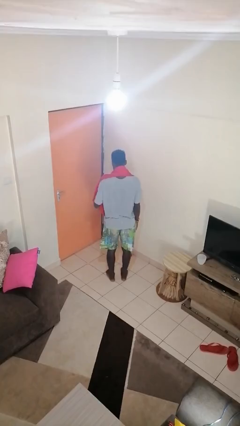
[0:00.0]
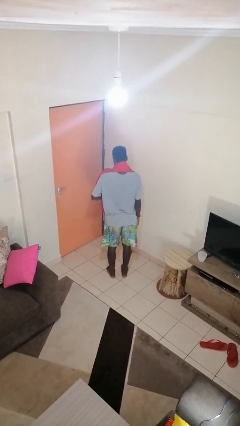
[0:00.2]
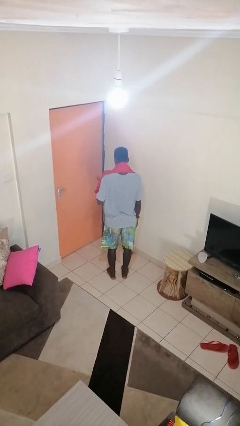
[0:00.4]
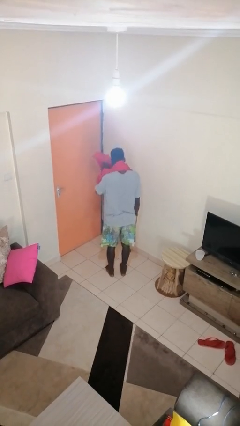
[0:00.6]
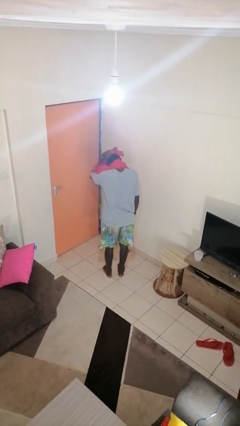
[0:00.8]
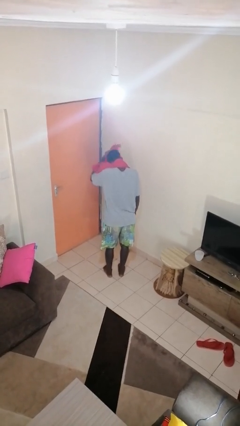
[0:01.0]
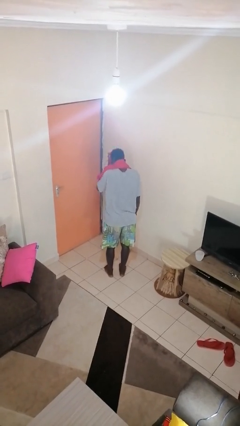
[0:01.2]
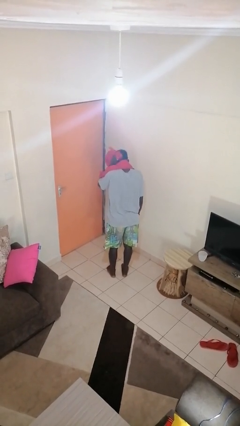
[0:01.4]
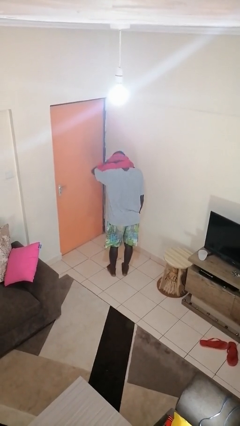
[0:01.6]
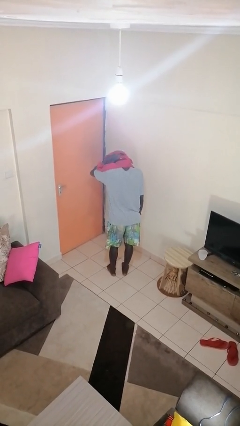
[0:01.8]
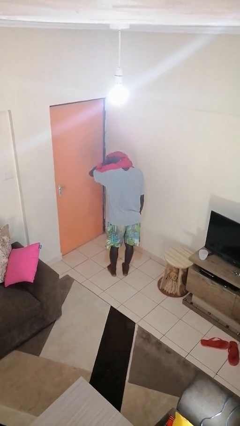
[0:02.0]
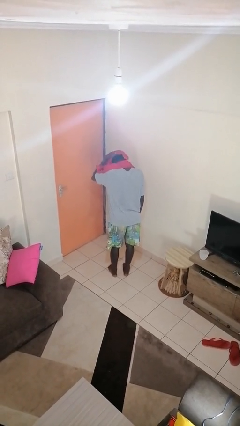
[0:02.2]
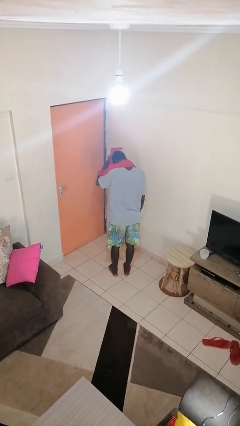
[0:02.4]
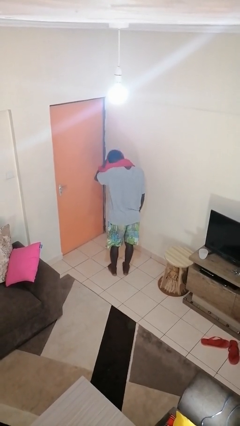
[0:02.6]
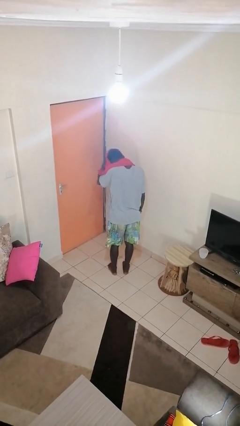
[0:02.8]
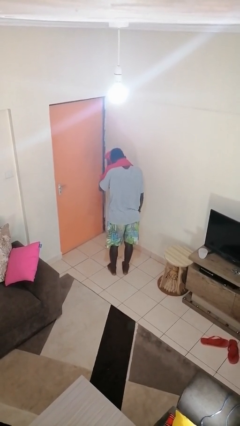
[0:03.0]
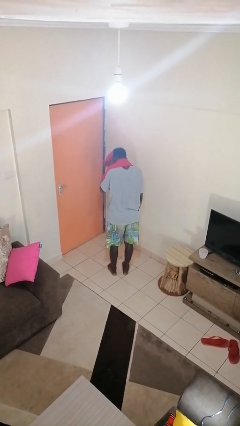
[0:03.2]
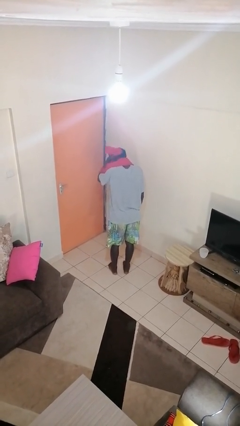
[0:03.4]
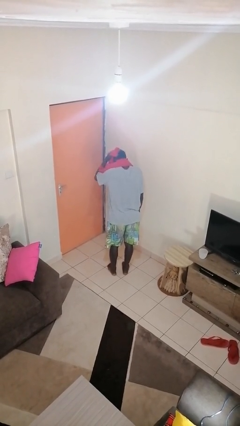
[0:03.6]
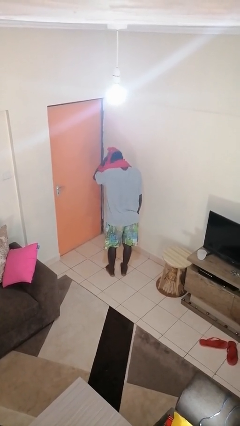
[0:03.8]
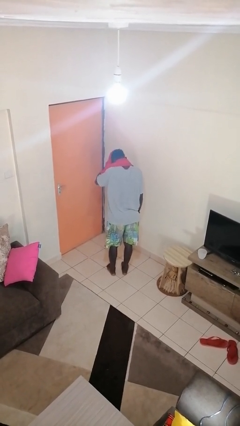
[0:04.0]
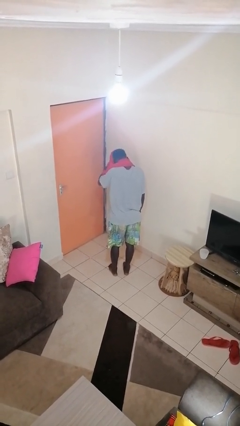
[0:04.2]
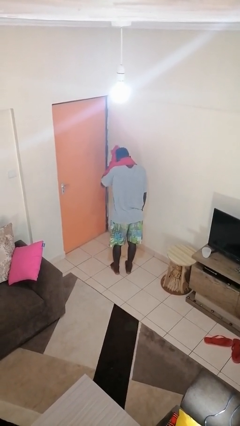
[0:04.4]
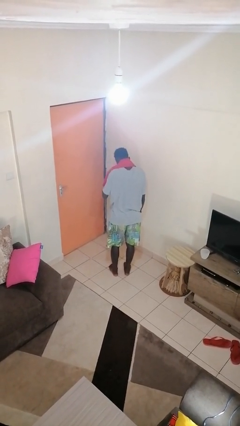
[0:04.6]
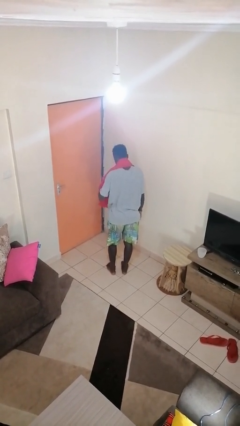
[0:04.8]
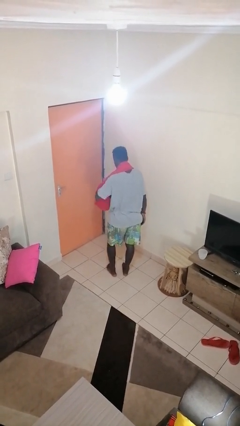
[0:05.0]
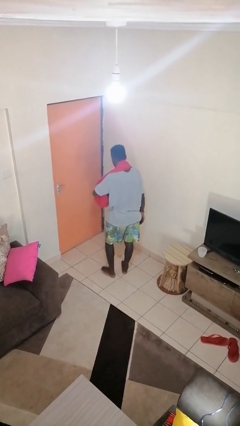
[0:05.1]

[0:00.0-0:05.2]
person dries hair with towel

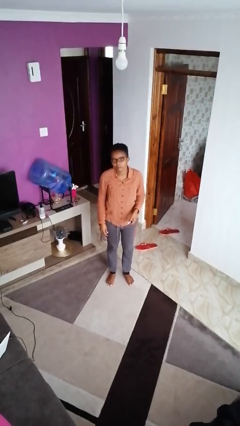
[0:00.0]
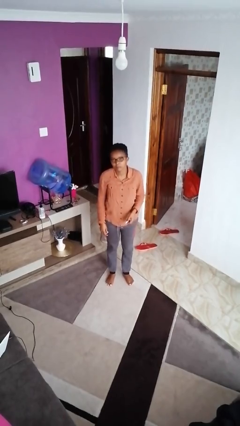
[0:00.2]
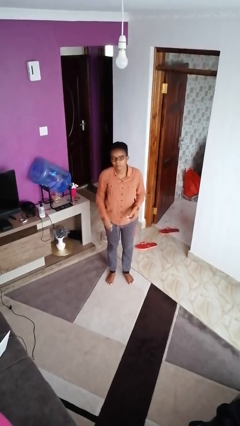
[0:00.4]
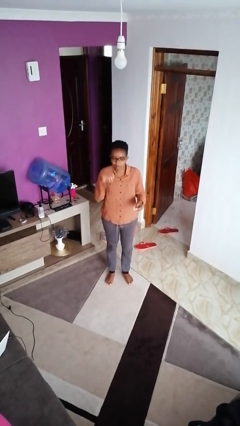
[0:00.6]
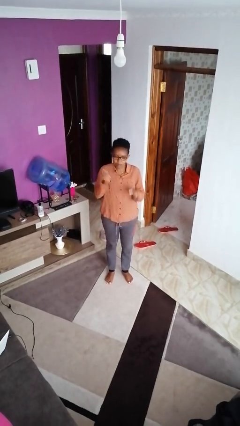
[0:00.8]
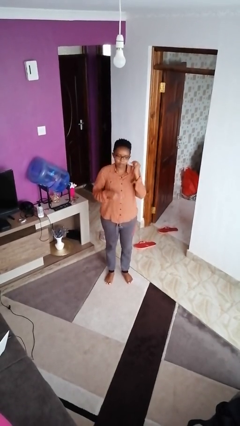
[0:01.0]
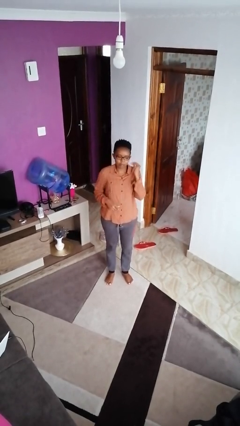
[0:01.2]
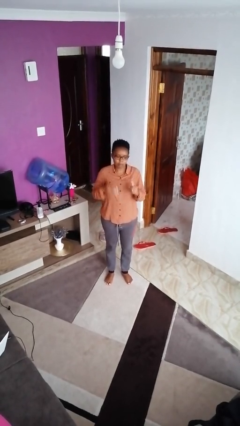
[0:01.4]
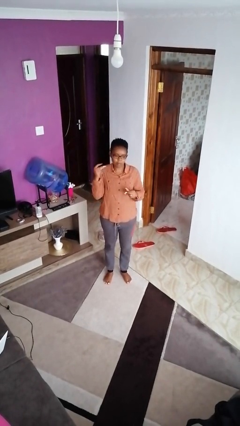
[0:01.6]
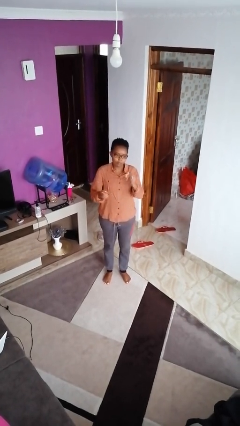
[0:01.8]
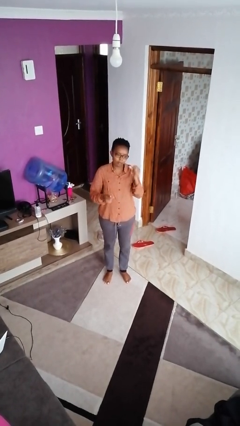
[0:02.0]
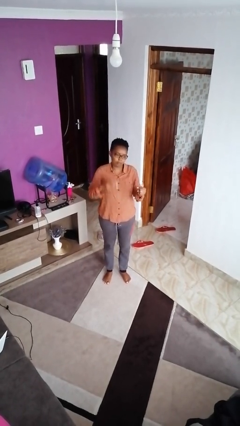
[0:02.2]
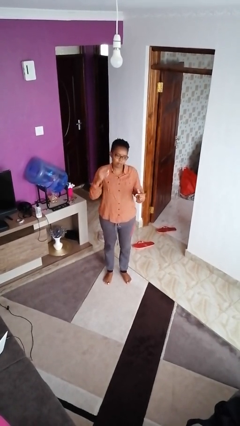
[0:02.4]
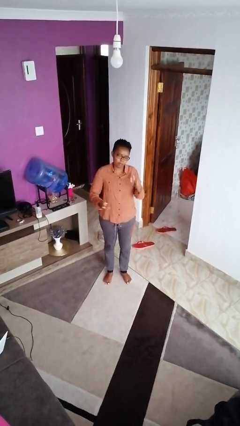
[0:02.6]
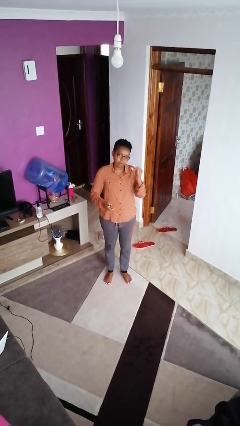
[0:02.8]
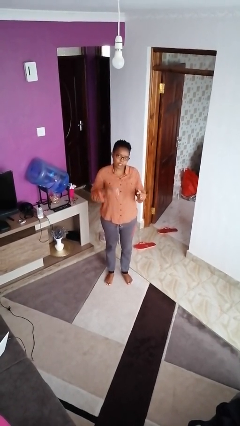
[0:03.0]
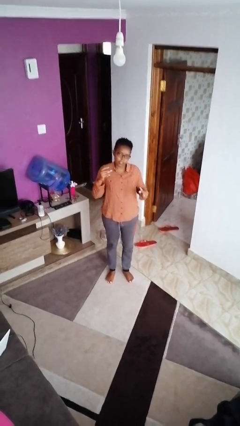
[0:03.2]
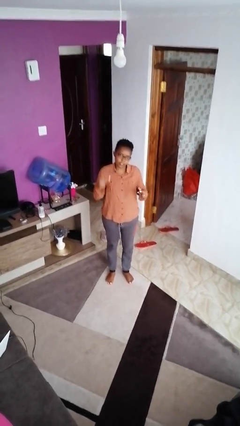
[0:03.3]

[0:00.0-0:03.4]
person snaps fingers

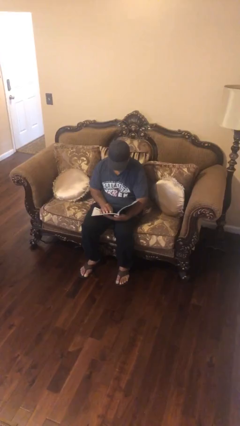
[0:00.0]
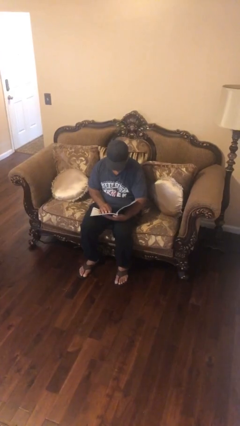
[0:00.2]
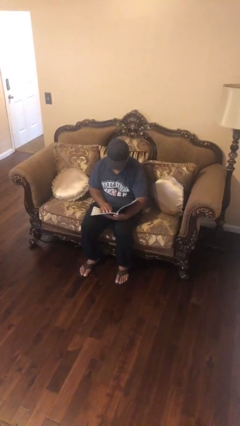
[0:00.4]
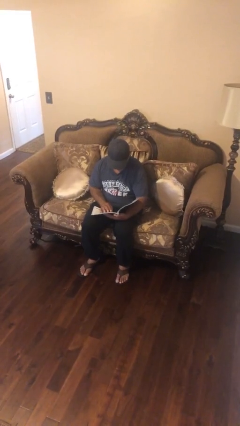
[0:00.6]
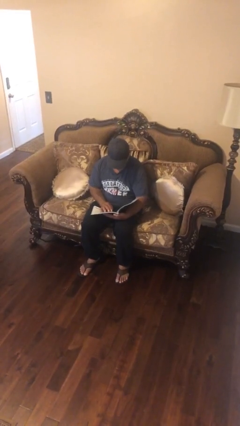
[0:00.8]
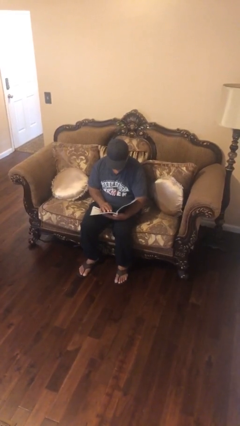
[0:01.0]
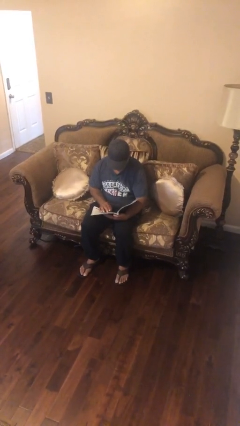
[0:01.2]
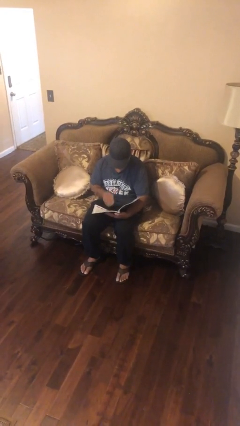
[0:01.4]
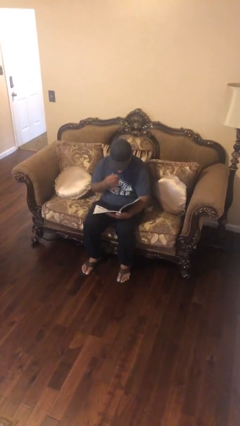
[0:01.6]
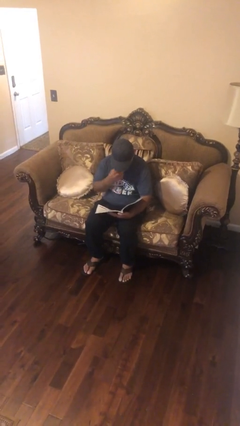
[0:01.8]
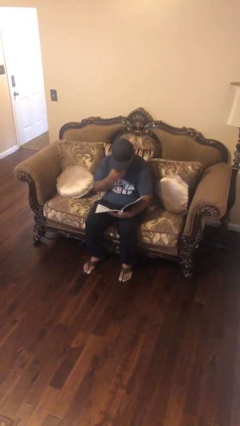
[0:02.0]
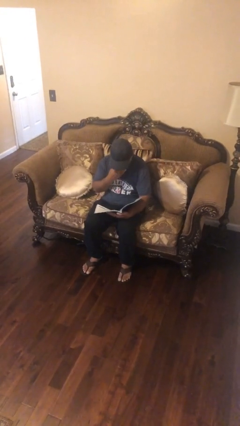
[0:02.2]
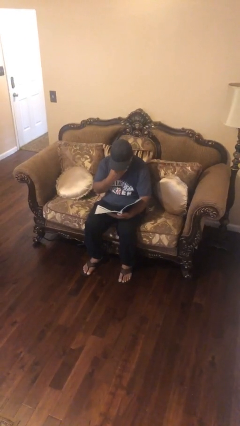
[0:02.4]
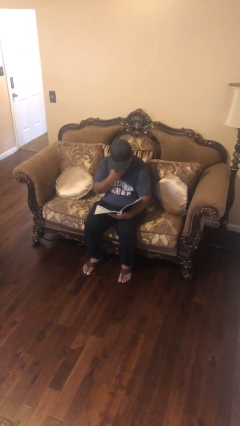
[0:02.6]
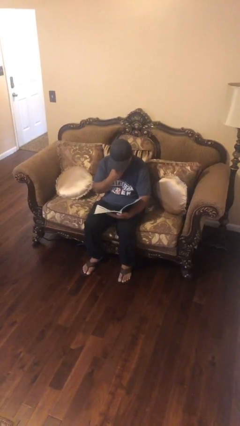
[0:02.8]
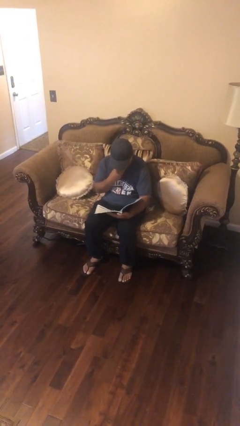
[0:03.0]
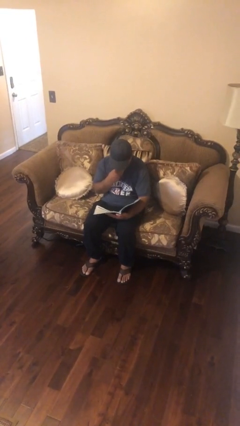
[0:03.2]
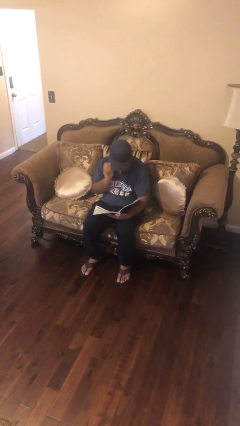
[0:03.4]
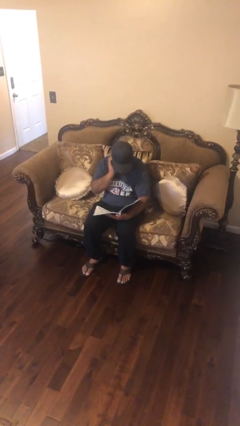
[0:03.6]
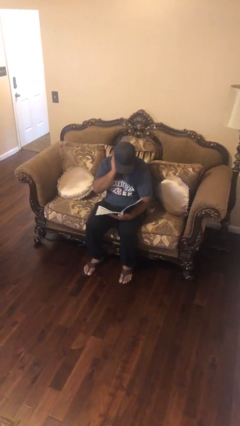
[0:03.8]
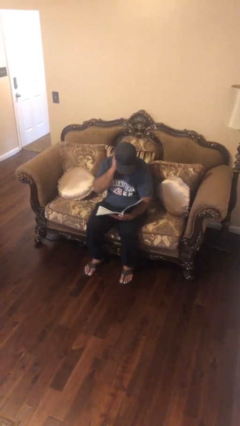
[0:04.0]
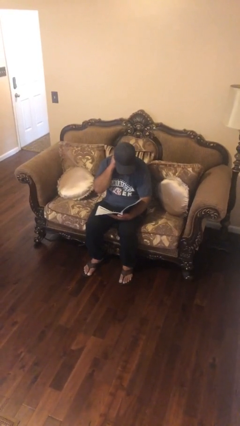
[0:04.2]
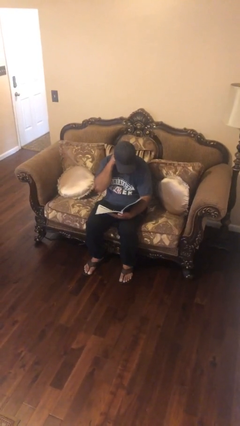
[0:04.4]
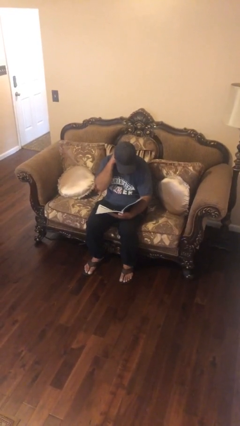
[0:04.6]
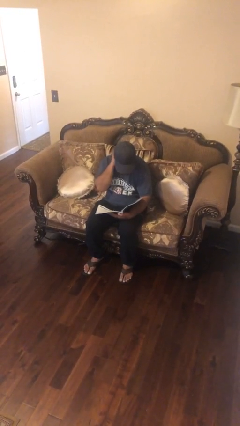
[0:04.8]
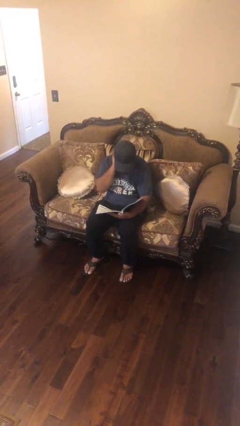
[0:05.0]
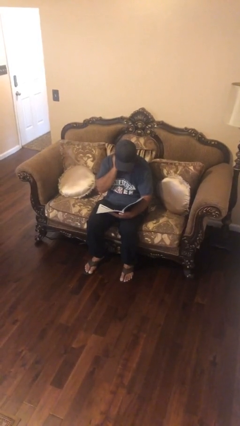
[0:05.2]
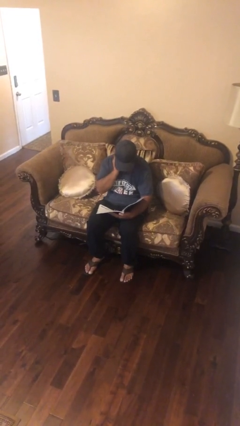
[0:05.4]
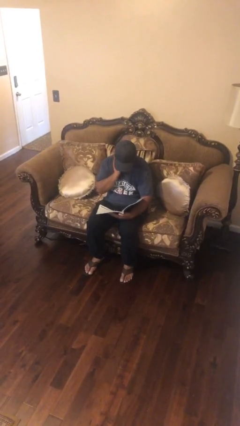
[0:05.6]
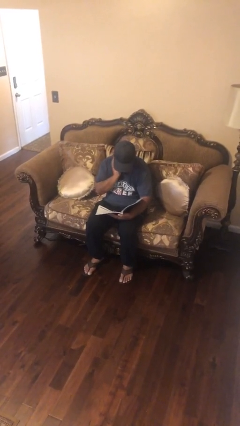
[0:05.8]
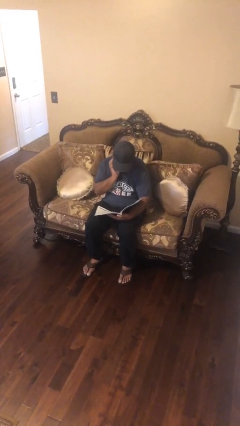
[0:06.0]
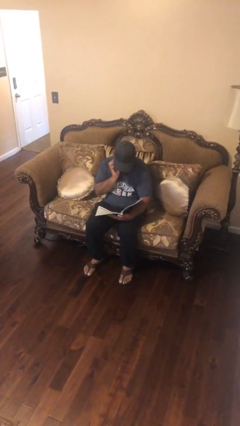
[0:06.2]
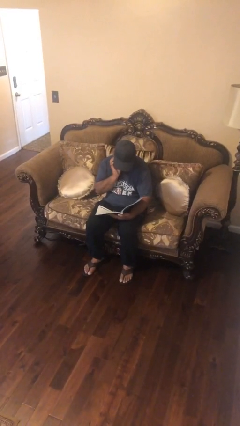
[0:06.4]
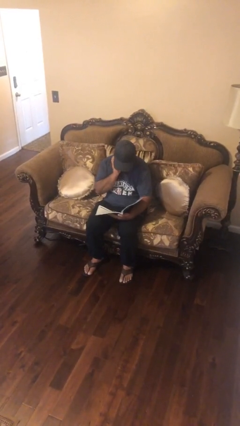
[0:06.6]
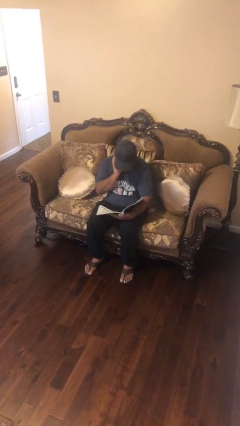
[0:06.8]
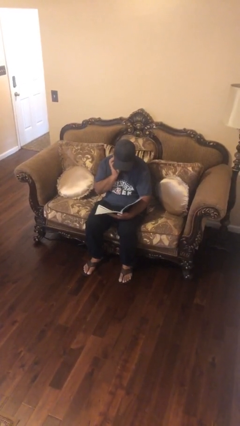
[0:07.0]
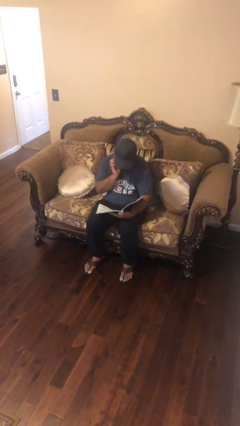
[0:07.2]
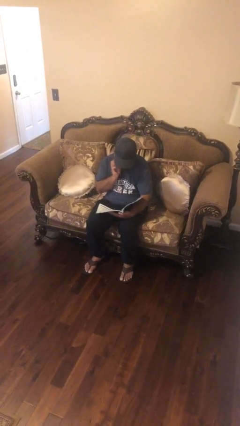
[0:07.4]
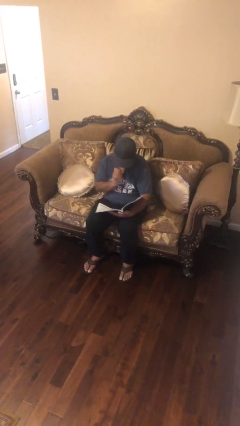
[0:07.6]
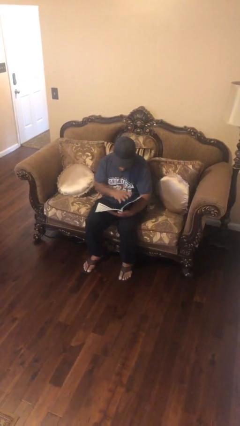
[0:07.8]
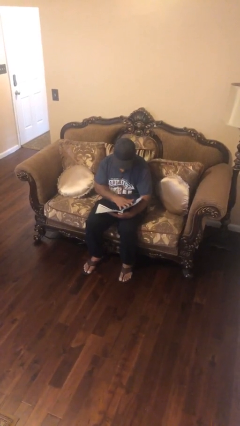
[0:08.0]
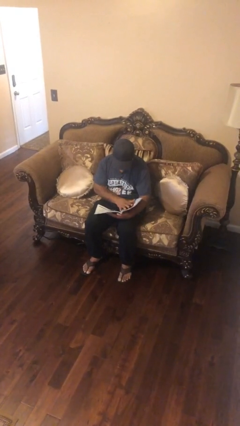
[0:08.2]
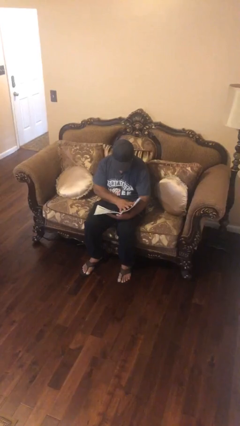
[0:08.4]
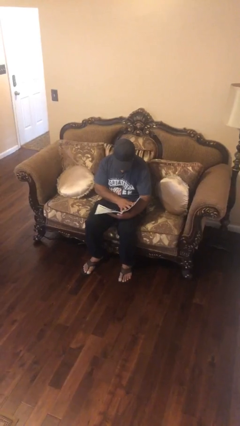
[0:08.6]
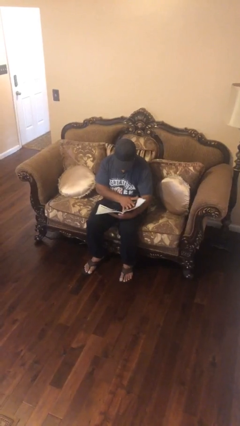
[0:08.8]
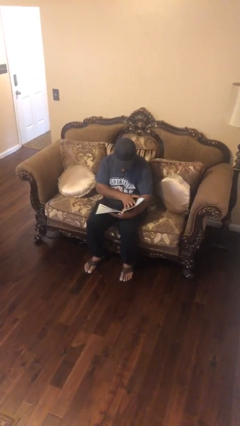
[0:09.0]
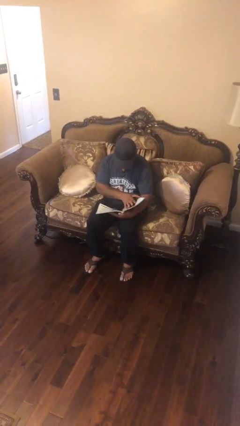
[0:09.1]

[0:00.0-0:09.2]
person reads document
